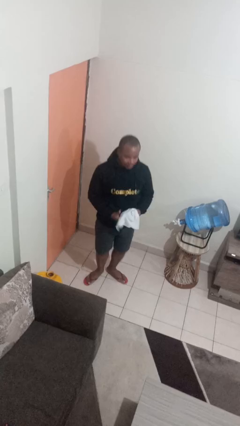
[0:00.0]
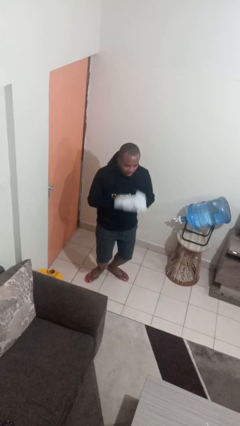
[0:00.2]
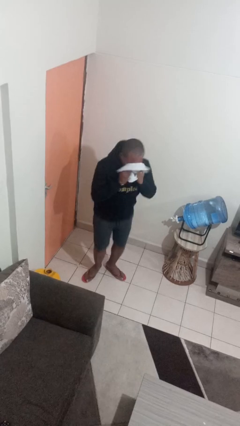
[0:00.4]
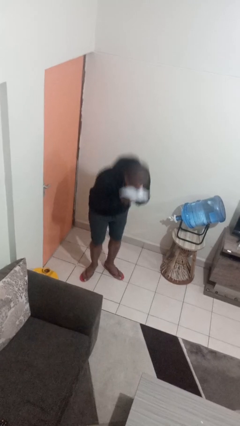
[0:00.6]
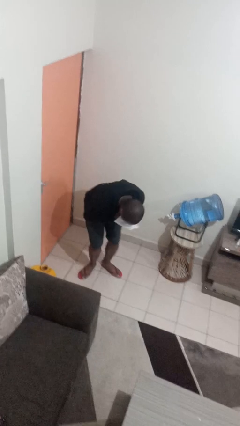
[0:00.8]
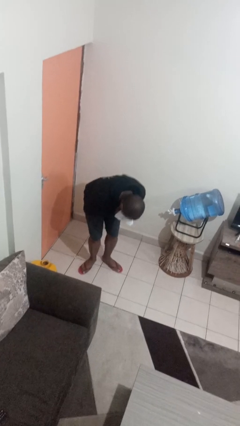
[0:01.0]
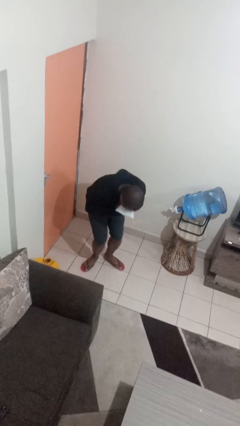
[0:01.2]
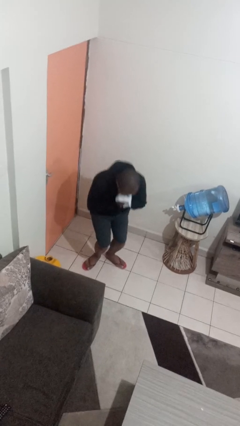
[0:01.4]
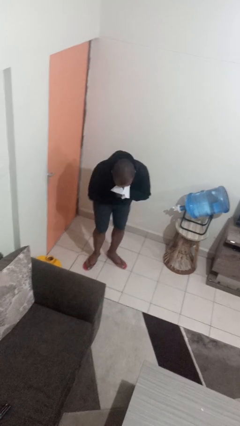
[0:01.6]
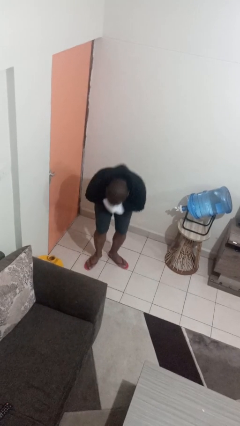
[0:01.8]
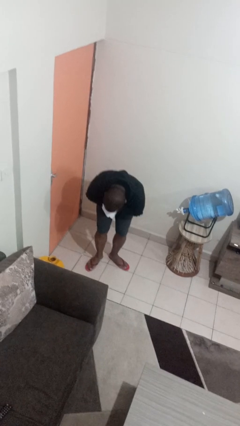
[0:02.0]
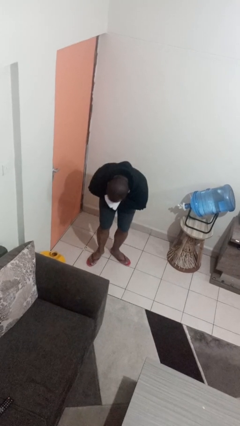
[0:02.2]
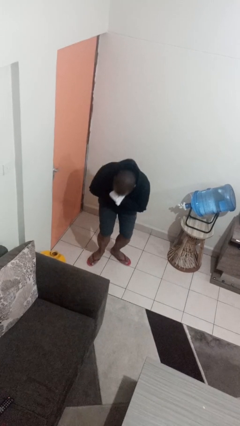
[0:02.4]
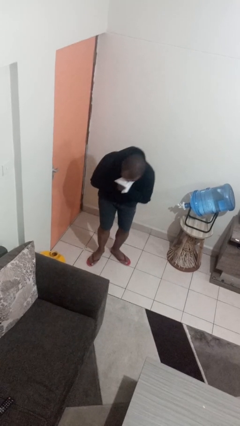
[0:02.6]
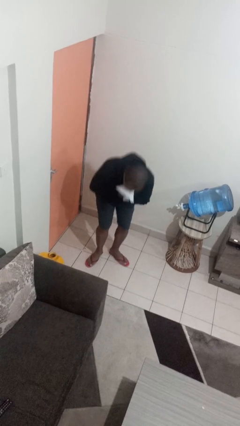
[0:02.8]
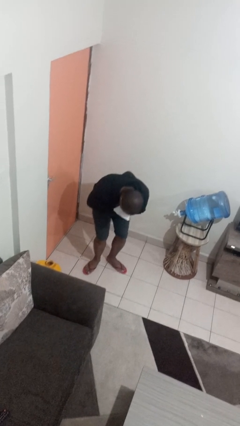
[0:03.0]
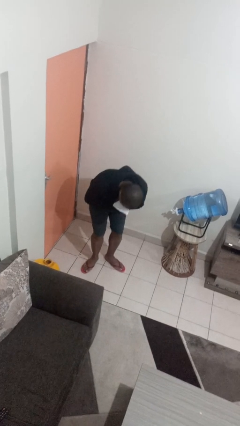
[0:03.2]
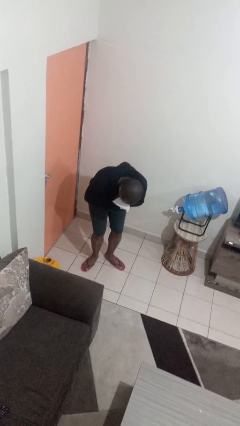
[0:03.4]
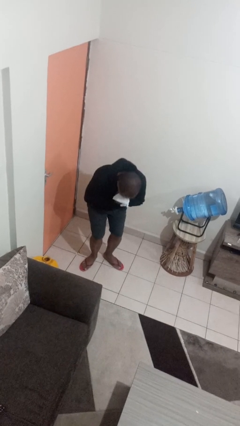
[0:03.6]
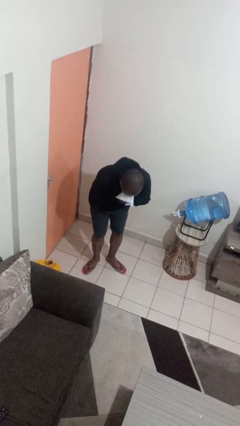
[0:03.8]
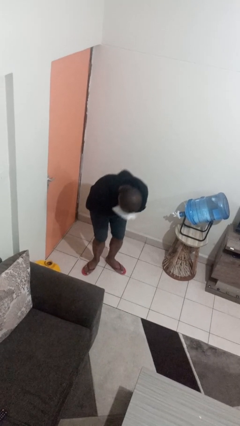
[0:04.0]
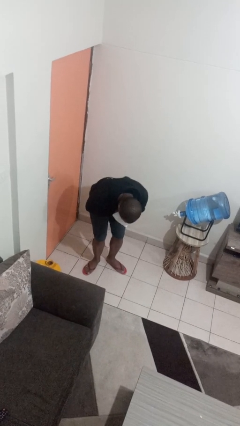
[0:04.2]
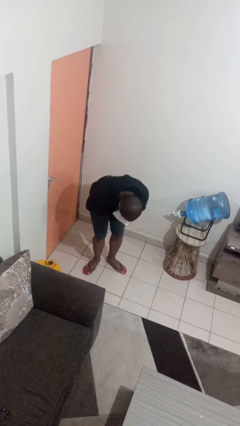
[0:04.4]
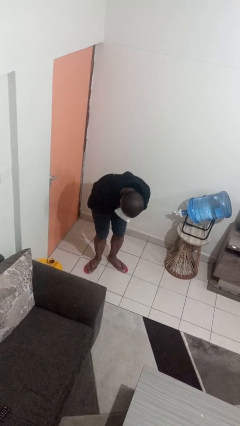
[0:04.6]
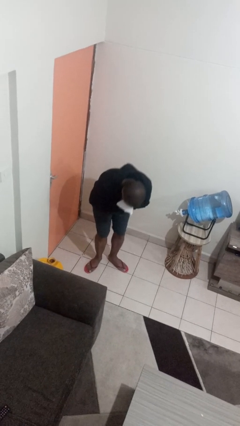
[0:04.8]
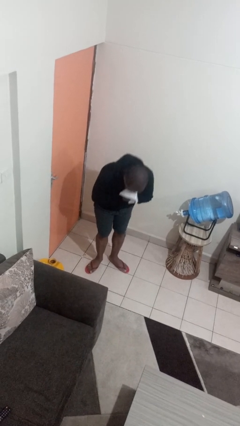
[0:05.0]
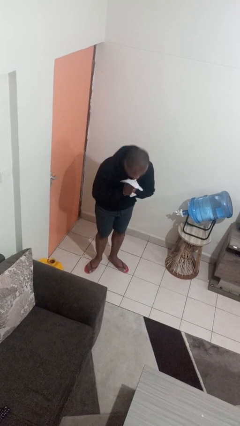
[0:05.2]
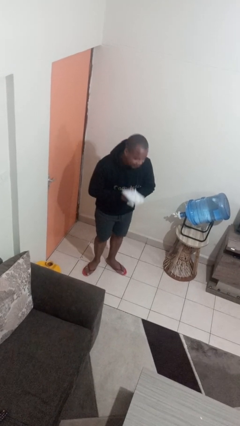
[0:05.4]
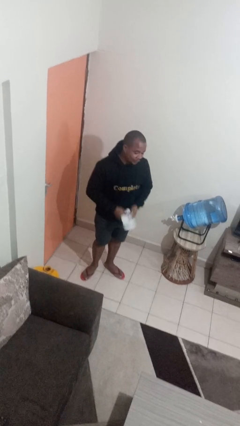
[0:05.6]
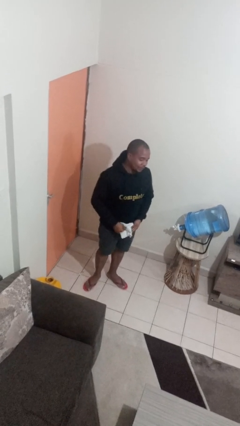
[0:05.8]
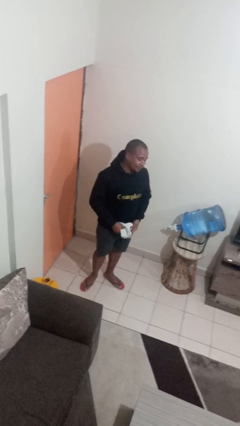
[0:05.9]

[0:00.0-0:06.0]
person blows nose

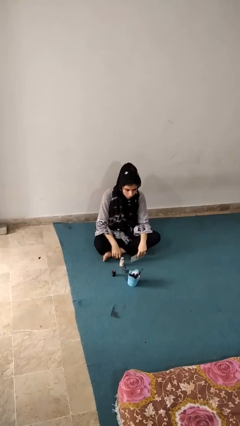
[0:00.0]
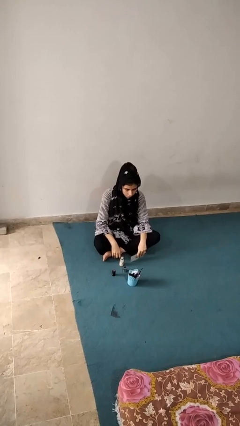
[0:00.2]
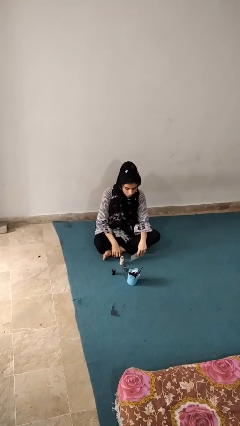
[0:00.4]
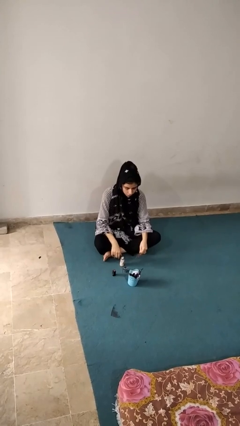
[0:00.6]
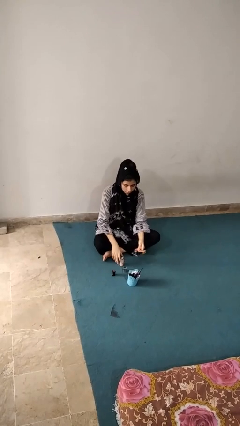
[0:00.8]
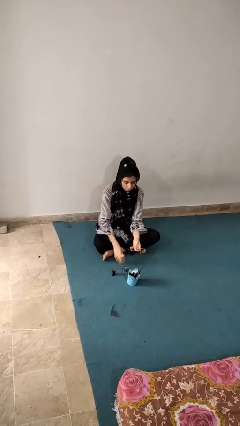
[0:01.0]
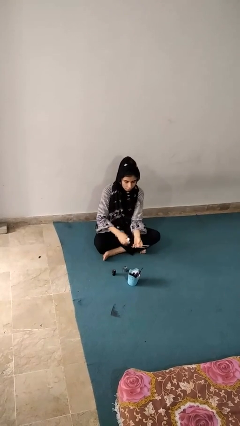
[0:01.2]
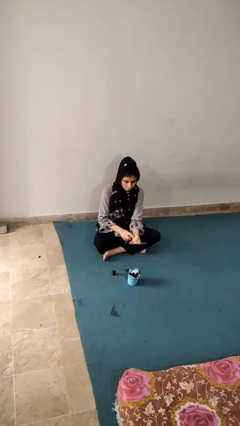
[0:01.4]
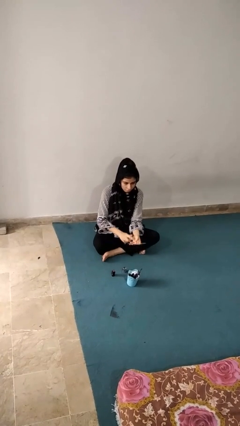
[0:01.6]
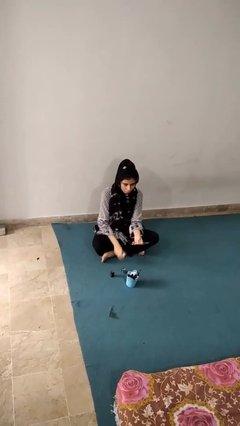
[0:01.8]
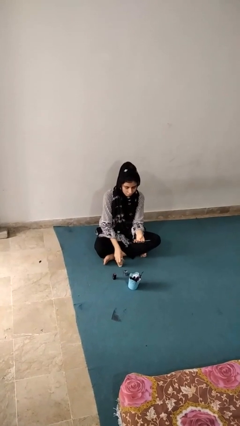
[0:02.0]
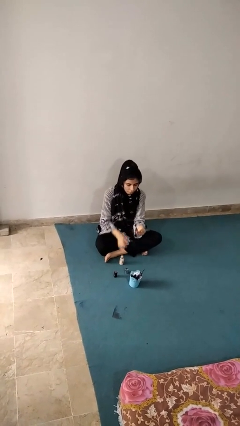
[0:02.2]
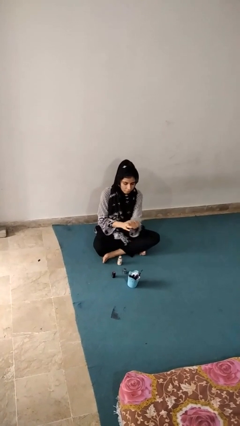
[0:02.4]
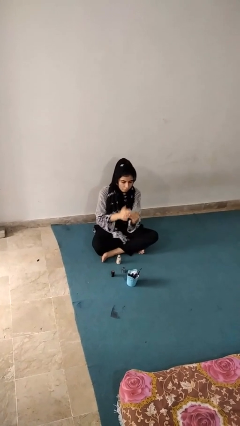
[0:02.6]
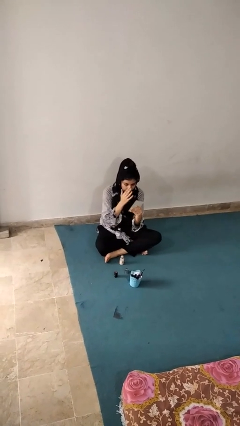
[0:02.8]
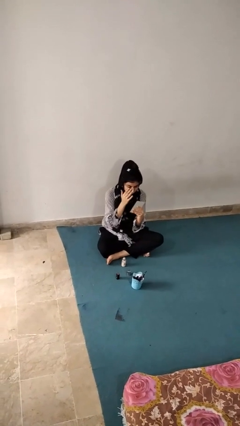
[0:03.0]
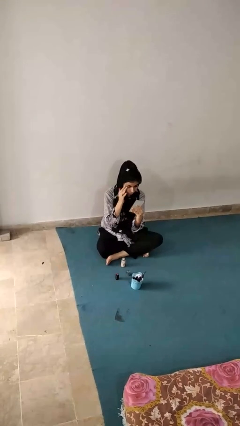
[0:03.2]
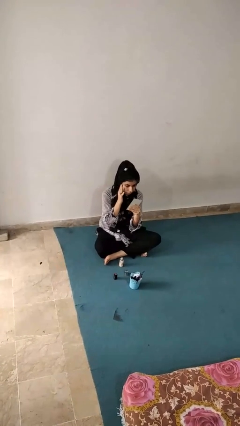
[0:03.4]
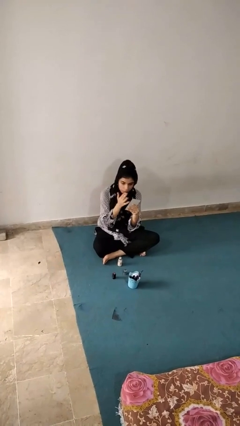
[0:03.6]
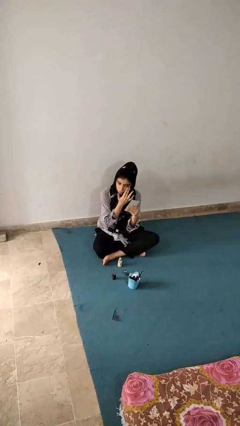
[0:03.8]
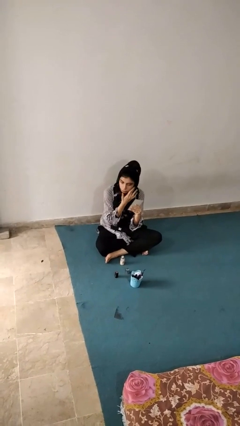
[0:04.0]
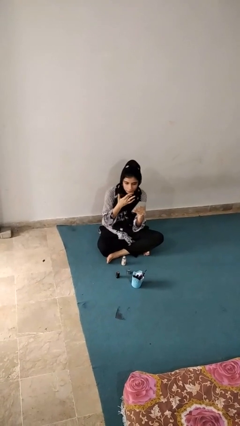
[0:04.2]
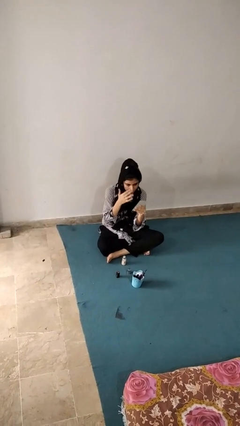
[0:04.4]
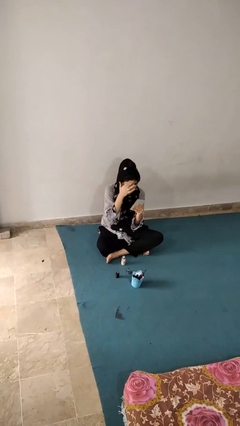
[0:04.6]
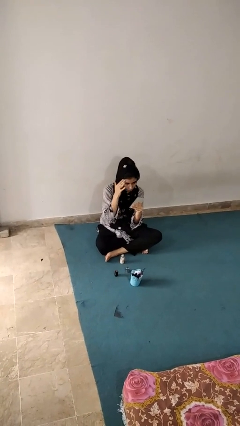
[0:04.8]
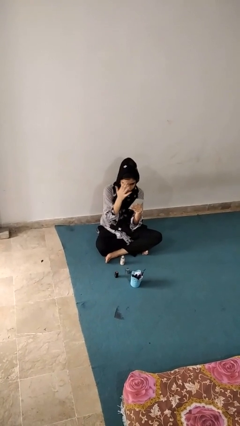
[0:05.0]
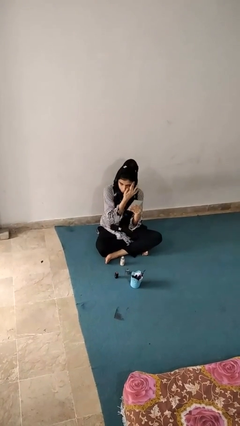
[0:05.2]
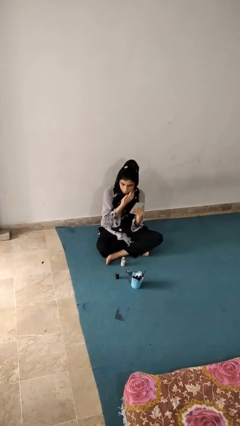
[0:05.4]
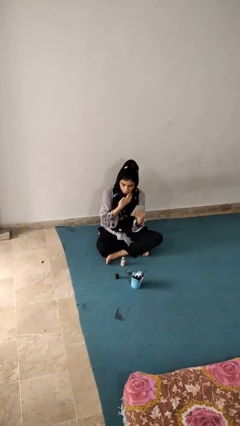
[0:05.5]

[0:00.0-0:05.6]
person applies foundation makeup

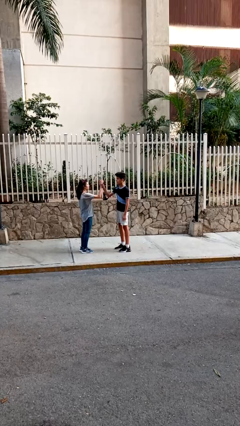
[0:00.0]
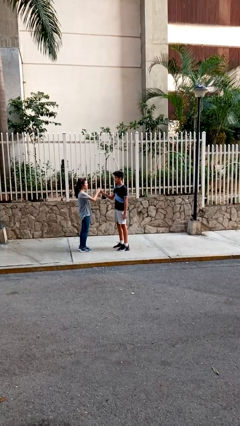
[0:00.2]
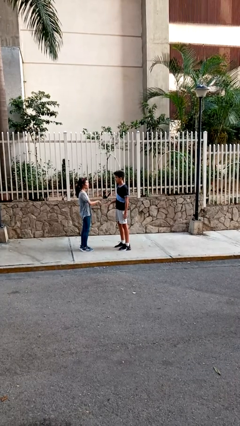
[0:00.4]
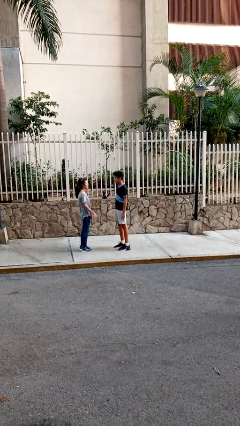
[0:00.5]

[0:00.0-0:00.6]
person highfives hand

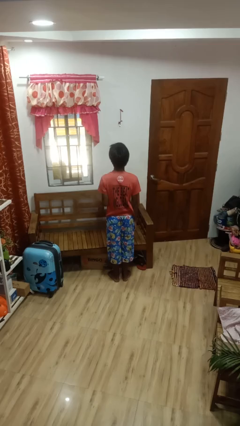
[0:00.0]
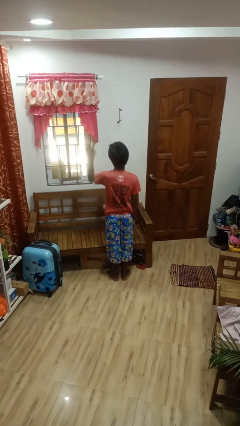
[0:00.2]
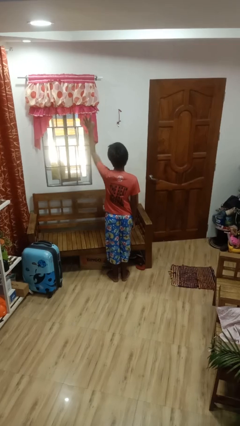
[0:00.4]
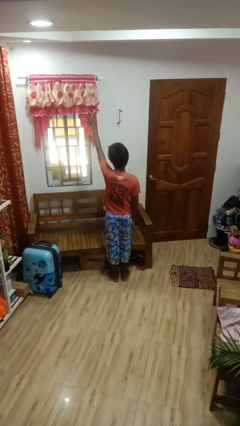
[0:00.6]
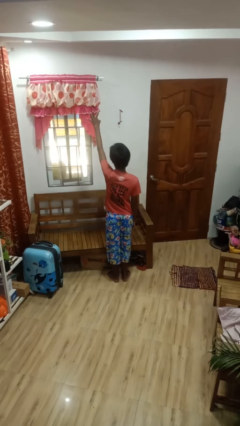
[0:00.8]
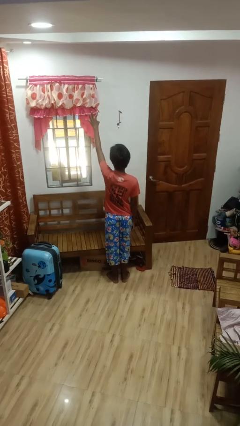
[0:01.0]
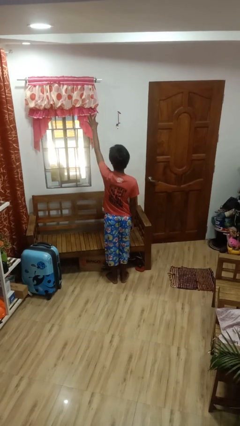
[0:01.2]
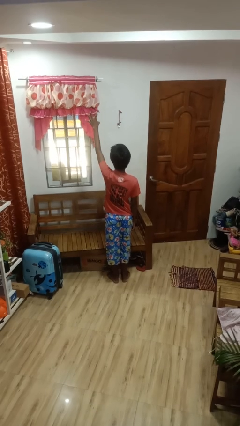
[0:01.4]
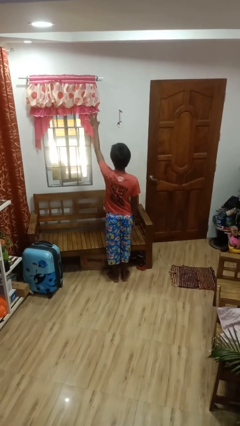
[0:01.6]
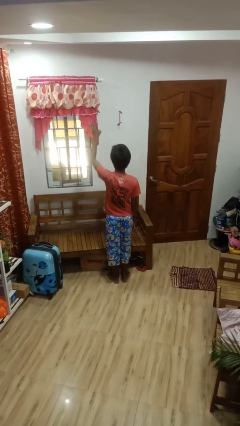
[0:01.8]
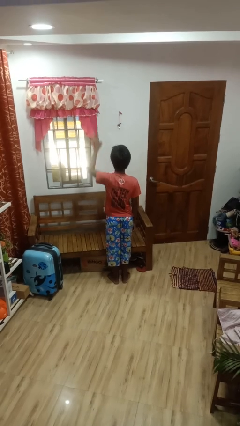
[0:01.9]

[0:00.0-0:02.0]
person gestures number four

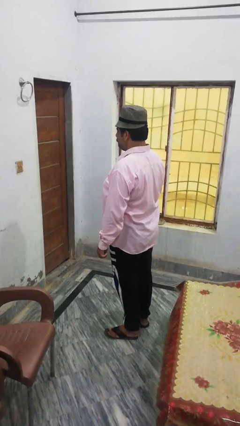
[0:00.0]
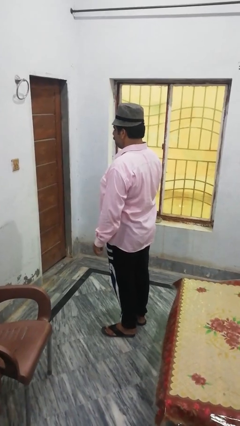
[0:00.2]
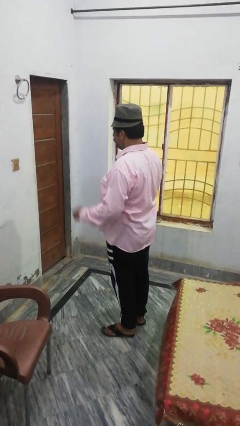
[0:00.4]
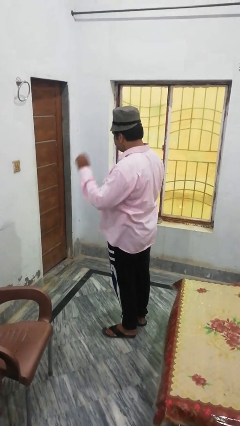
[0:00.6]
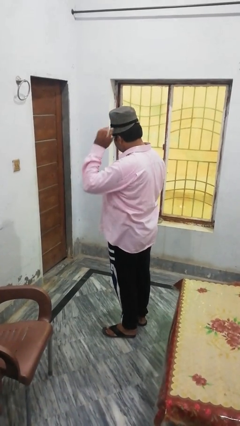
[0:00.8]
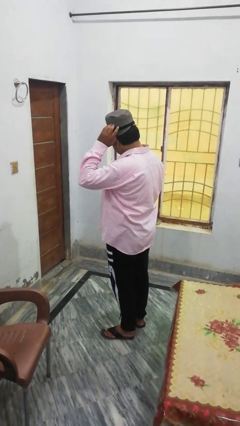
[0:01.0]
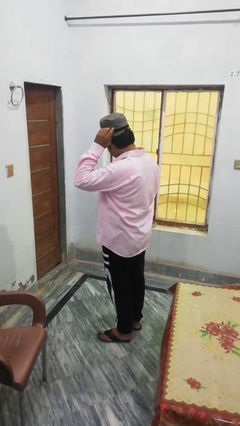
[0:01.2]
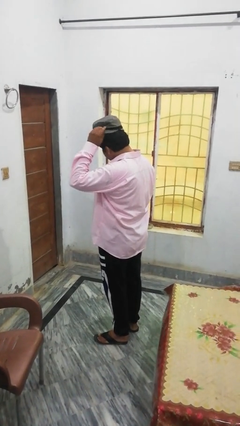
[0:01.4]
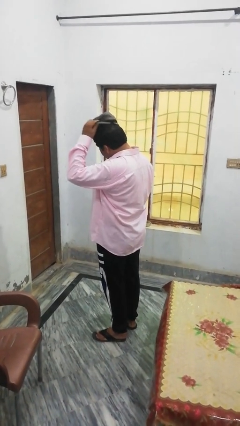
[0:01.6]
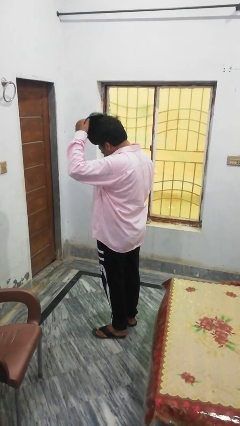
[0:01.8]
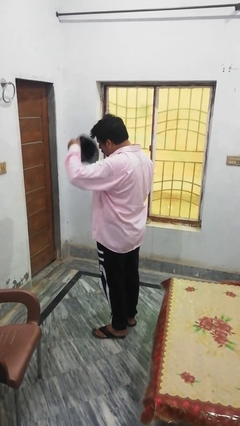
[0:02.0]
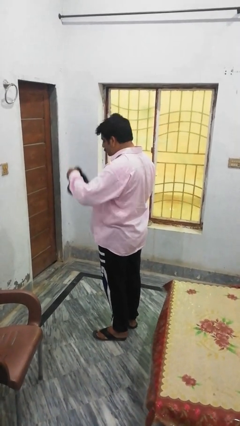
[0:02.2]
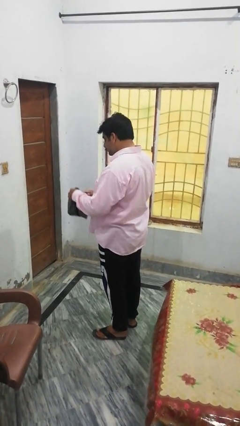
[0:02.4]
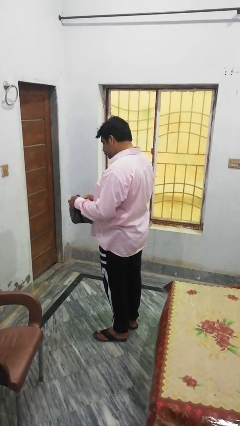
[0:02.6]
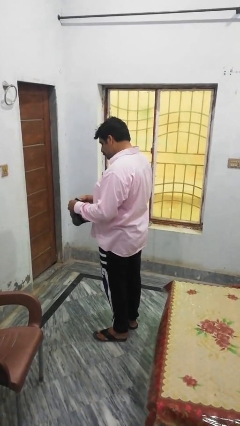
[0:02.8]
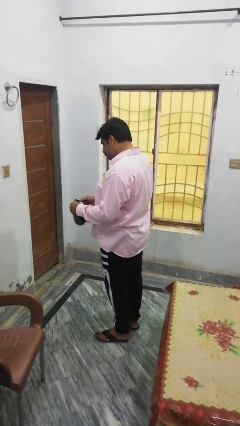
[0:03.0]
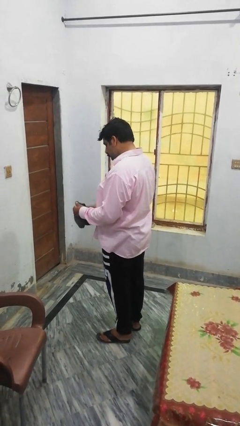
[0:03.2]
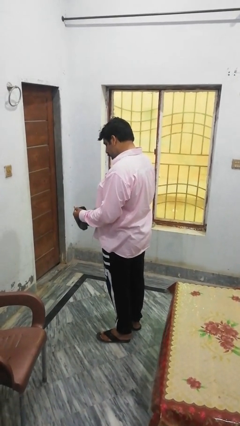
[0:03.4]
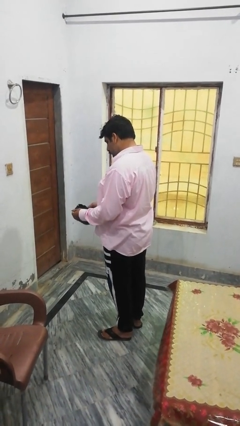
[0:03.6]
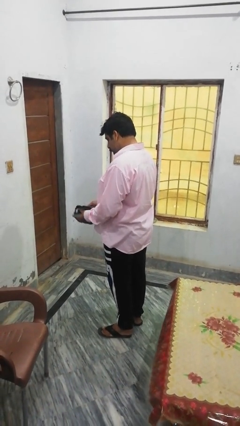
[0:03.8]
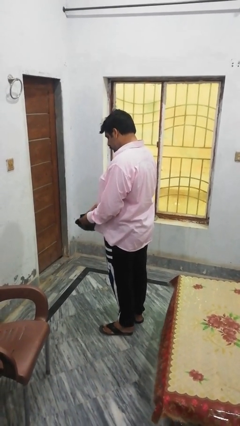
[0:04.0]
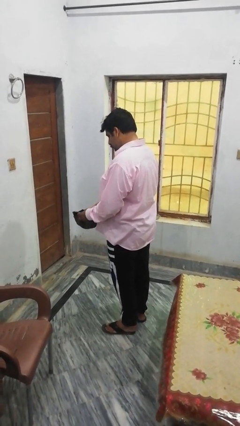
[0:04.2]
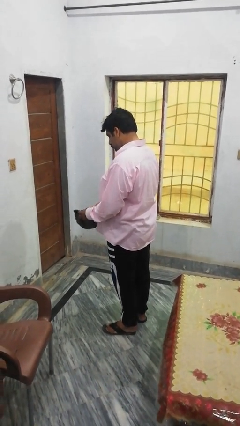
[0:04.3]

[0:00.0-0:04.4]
person takes off hat
